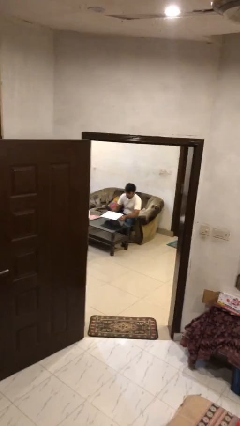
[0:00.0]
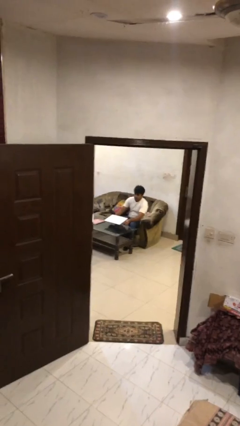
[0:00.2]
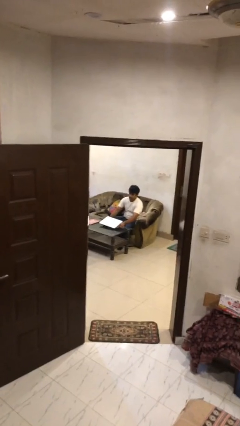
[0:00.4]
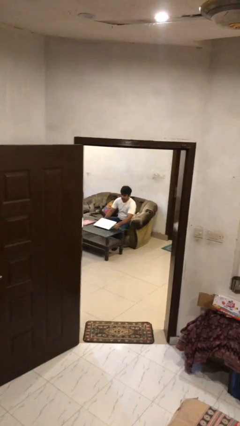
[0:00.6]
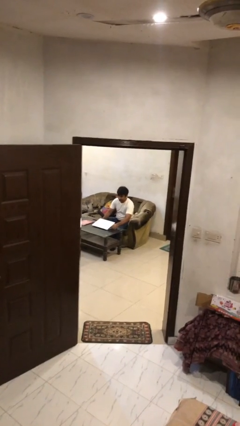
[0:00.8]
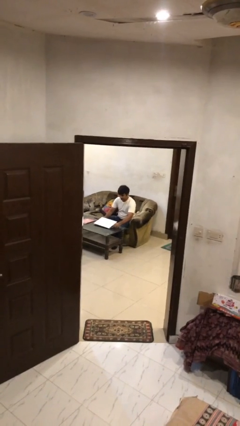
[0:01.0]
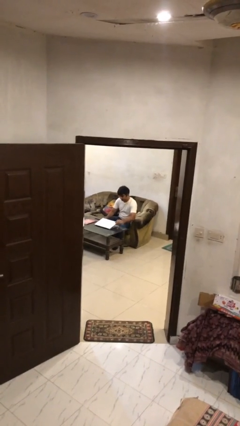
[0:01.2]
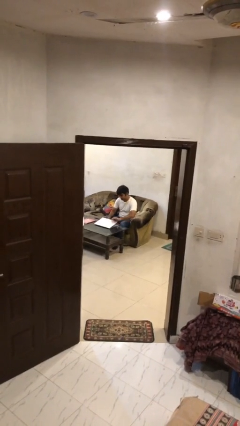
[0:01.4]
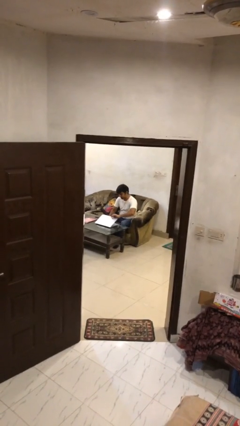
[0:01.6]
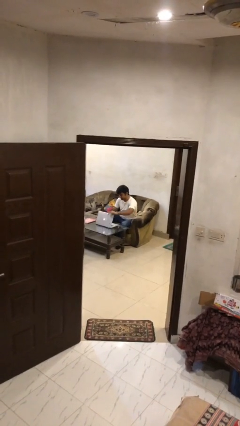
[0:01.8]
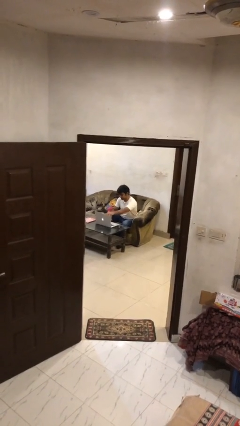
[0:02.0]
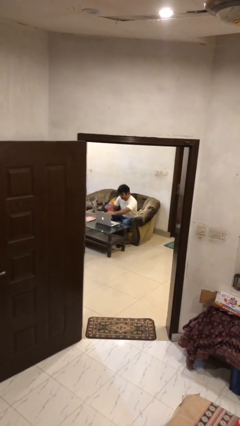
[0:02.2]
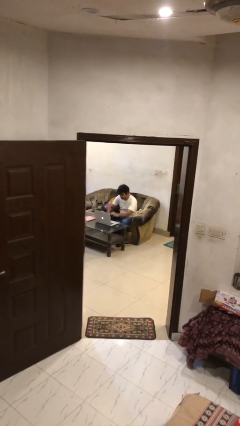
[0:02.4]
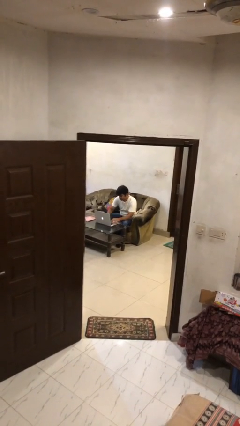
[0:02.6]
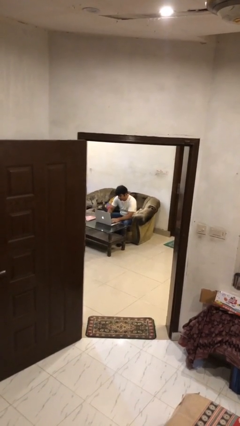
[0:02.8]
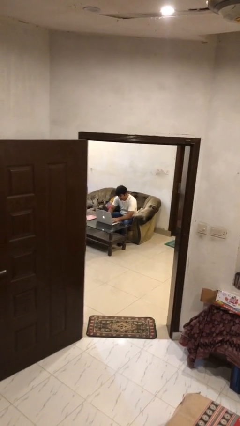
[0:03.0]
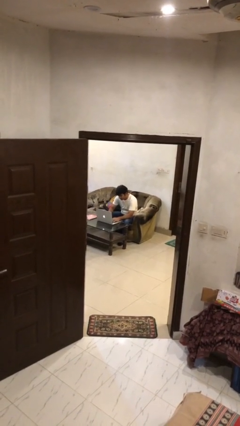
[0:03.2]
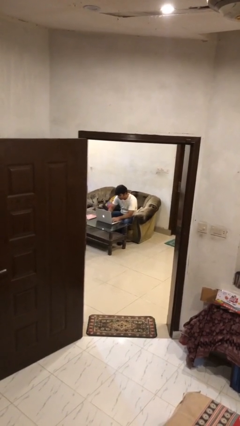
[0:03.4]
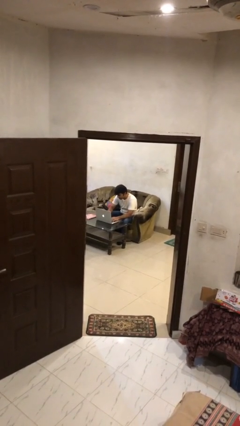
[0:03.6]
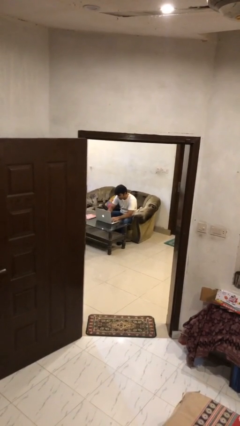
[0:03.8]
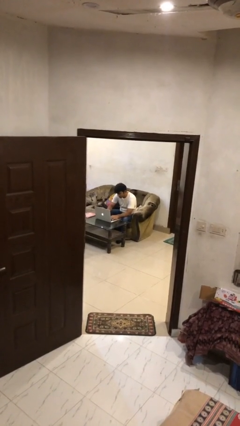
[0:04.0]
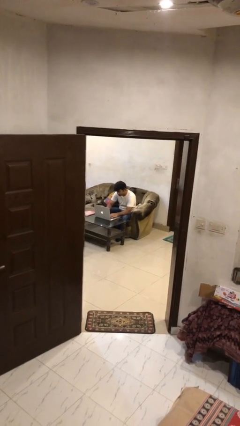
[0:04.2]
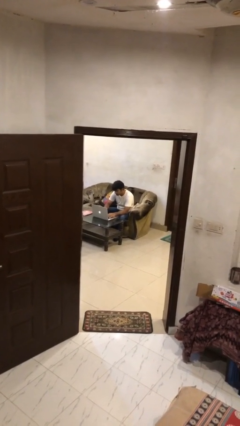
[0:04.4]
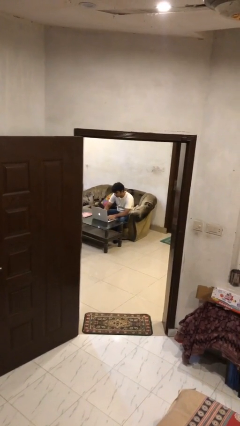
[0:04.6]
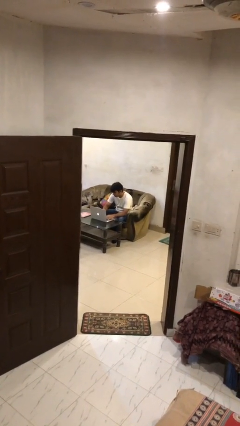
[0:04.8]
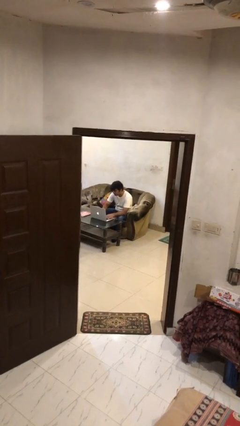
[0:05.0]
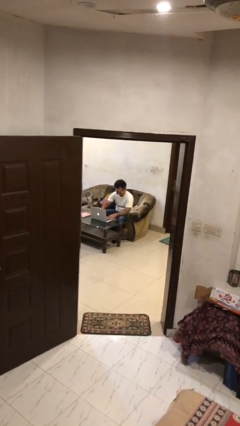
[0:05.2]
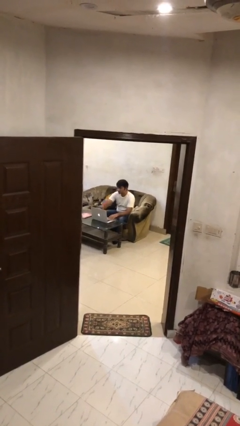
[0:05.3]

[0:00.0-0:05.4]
person interacts with laptop

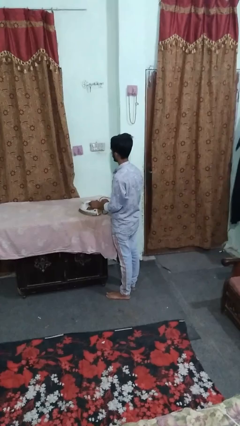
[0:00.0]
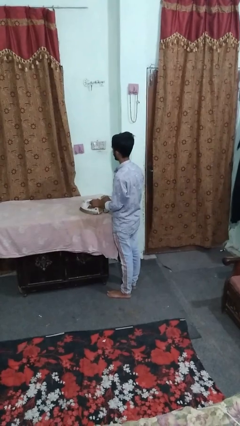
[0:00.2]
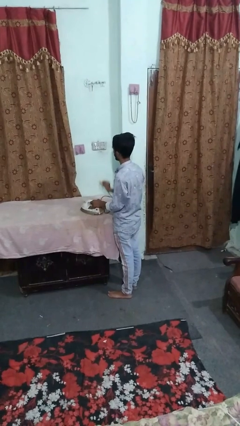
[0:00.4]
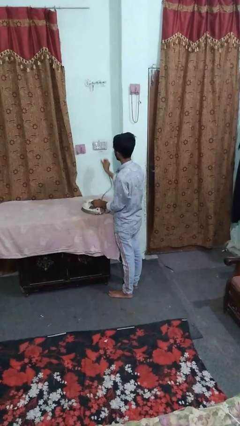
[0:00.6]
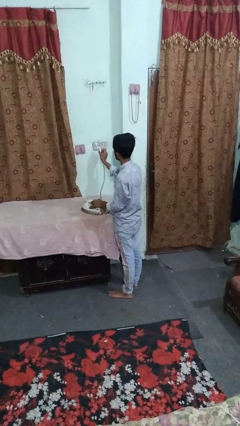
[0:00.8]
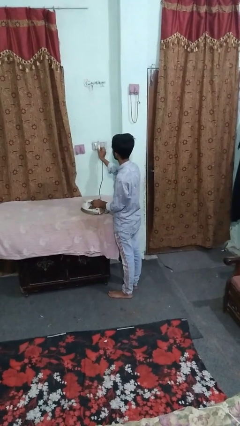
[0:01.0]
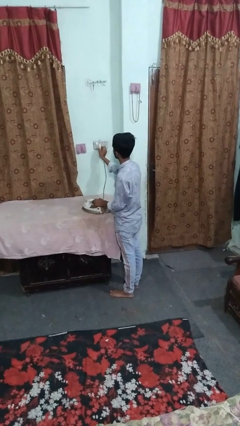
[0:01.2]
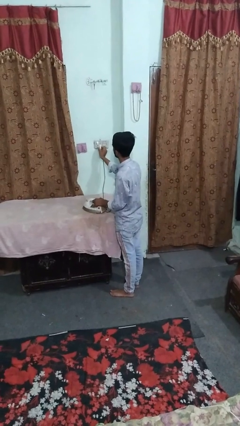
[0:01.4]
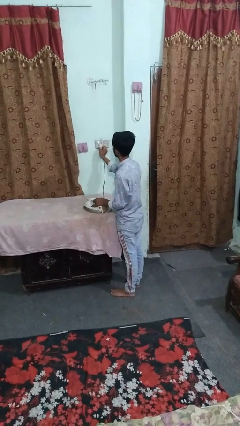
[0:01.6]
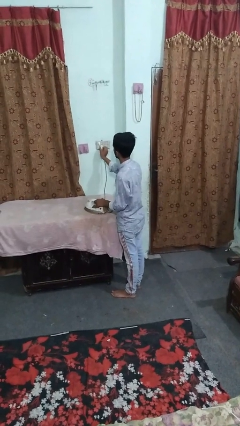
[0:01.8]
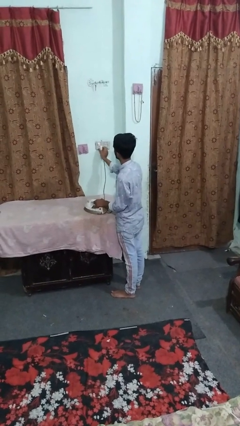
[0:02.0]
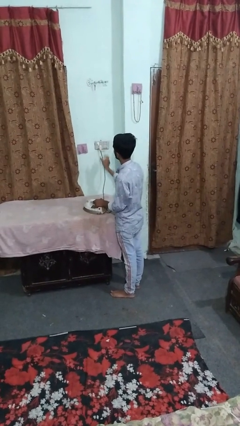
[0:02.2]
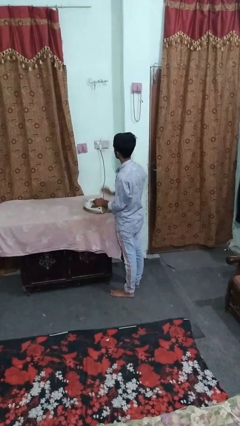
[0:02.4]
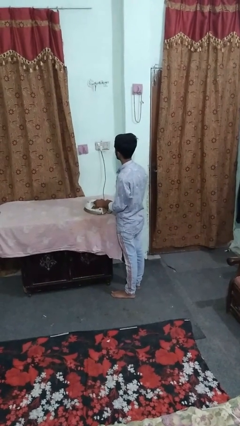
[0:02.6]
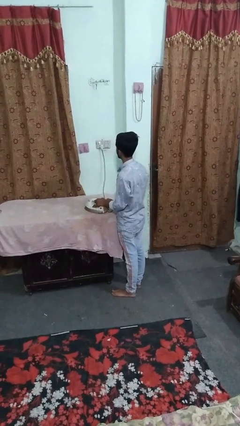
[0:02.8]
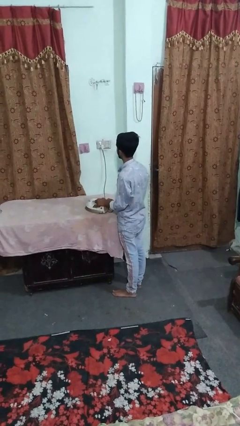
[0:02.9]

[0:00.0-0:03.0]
person plugs into electrical socket

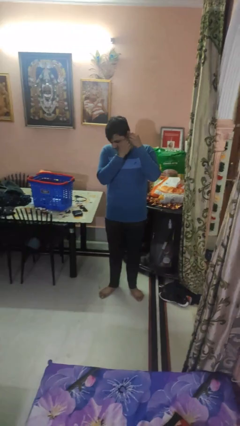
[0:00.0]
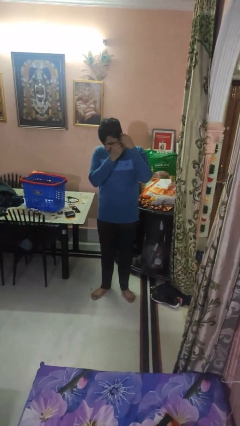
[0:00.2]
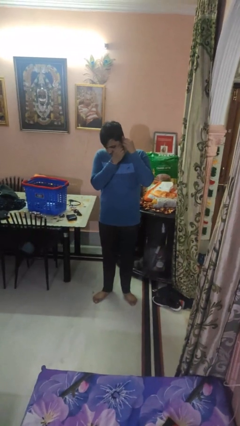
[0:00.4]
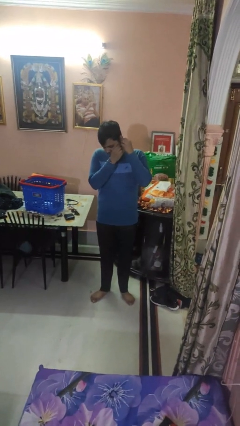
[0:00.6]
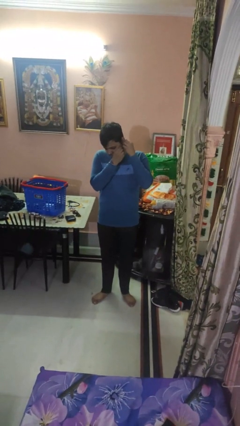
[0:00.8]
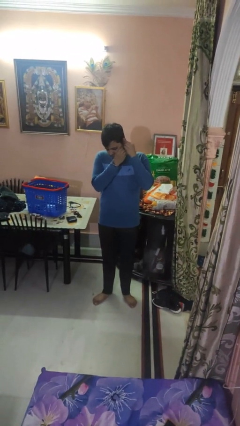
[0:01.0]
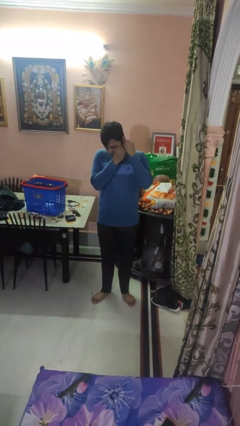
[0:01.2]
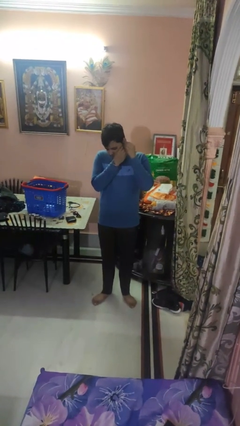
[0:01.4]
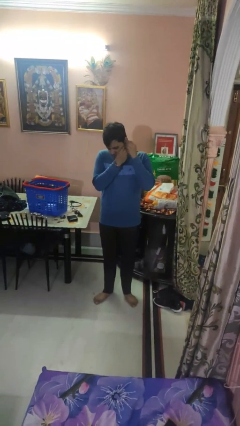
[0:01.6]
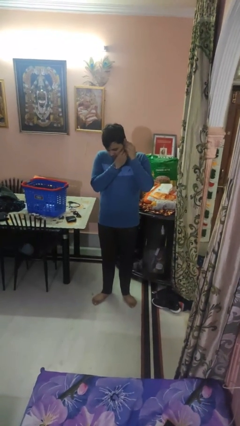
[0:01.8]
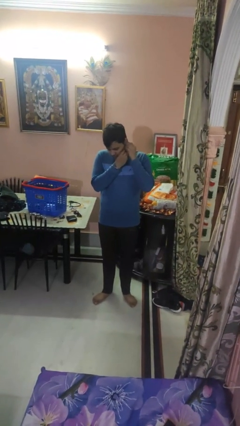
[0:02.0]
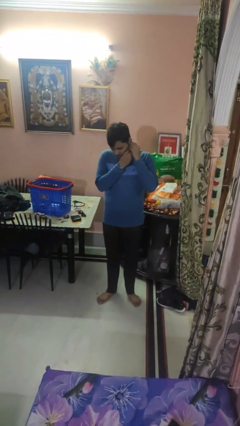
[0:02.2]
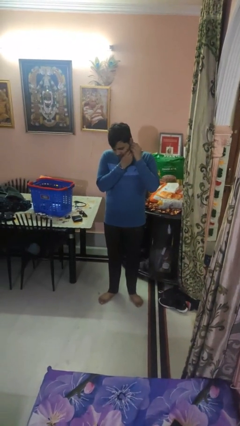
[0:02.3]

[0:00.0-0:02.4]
person puts on earrings

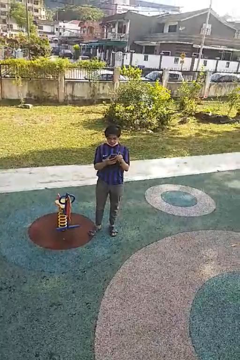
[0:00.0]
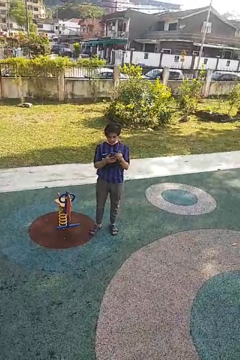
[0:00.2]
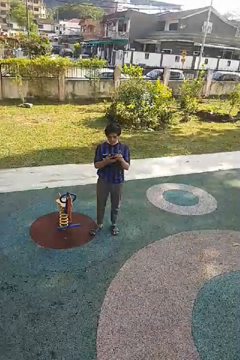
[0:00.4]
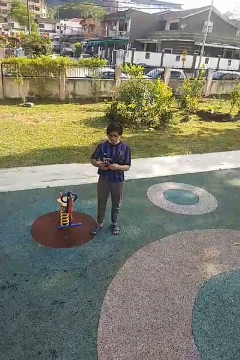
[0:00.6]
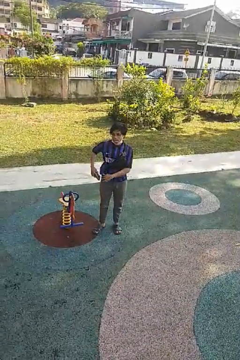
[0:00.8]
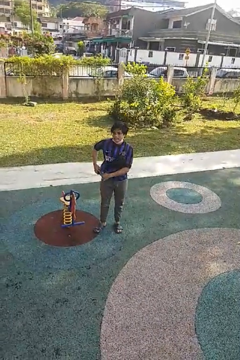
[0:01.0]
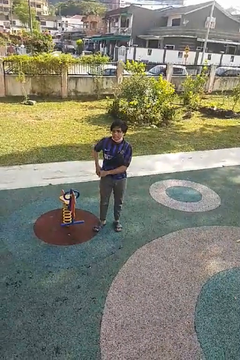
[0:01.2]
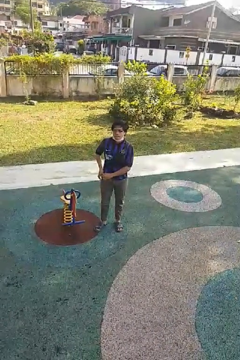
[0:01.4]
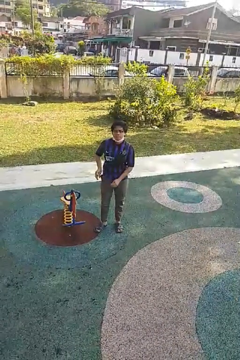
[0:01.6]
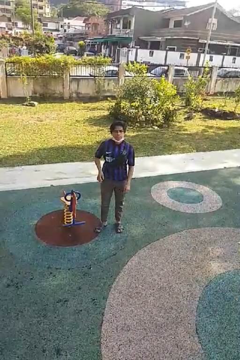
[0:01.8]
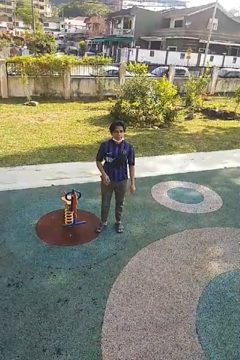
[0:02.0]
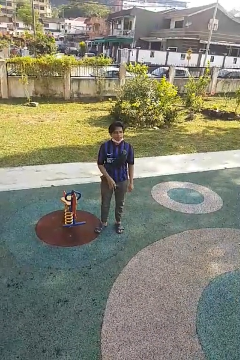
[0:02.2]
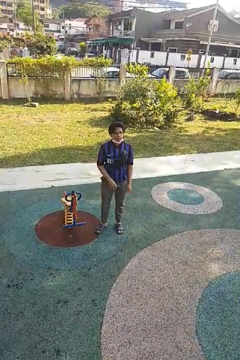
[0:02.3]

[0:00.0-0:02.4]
person puts phone into pocket

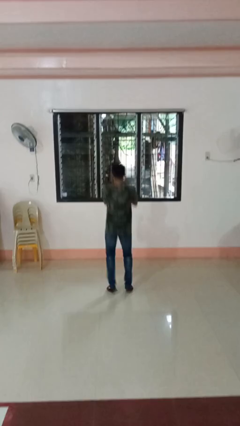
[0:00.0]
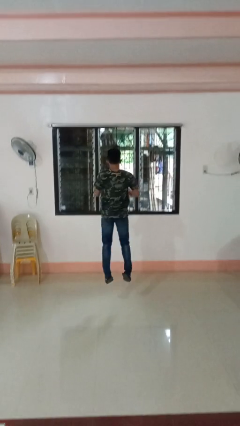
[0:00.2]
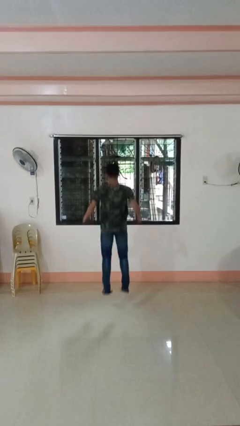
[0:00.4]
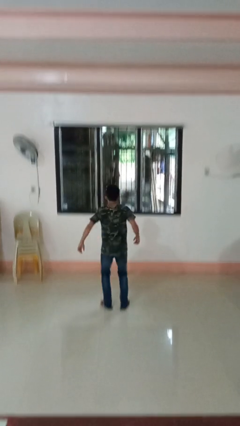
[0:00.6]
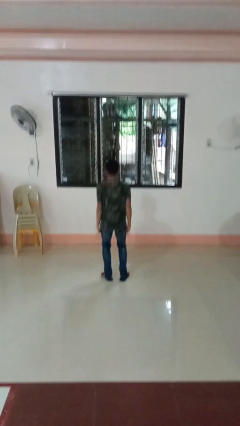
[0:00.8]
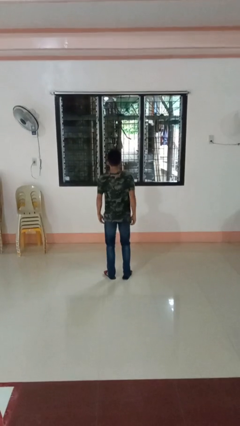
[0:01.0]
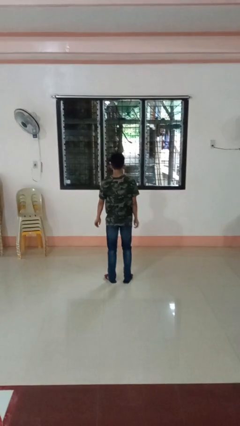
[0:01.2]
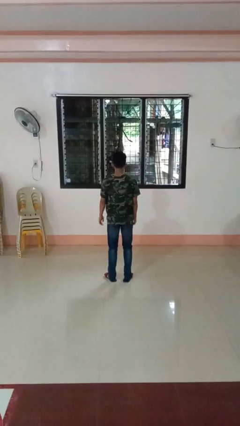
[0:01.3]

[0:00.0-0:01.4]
person jumps

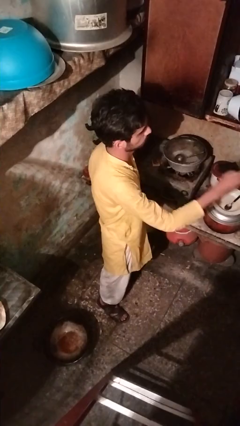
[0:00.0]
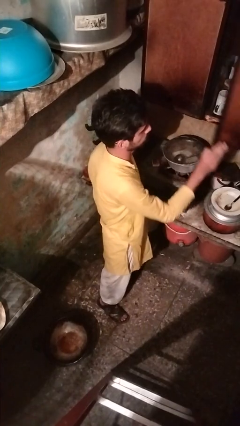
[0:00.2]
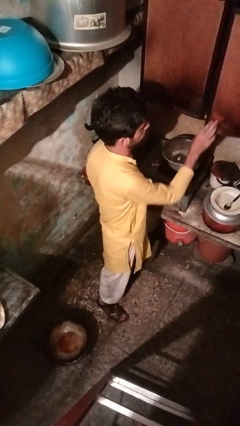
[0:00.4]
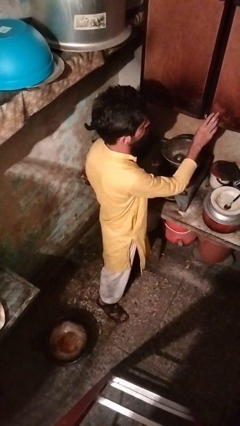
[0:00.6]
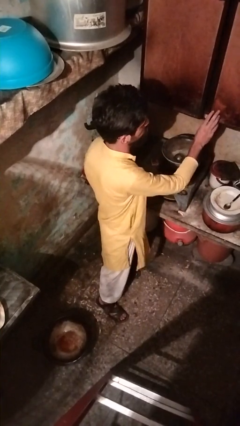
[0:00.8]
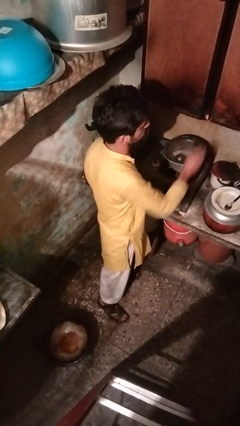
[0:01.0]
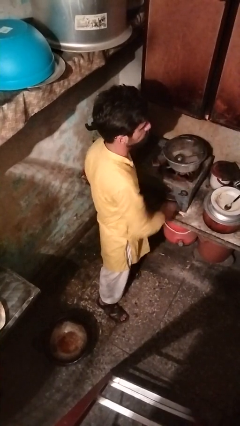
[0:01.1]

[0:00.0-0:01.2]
person closes cabinet

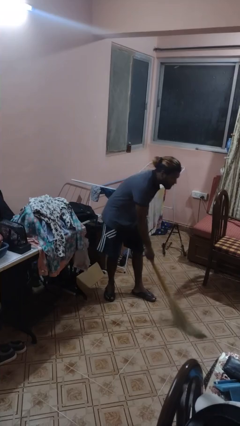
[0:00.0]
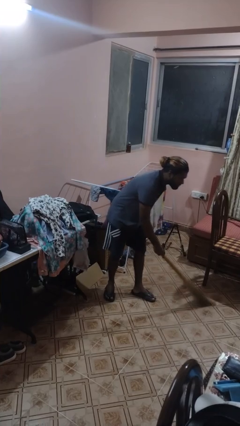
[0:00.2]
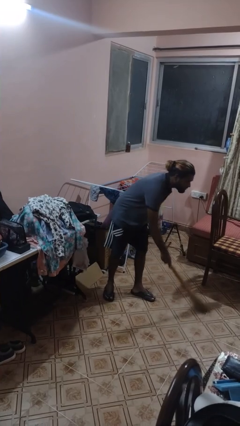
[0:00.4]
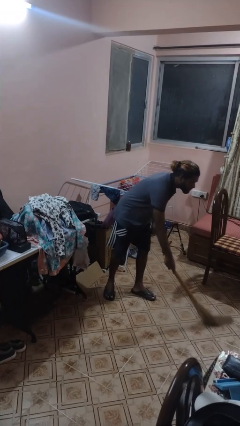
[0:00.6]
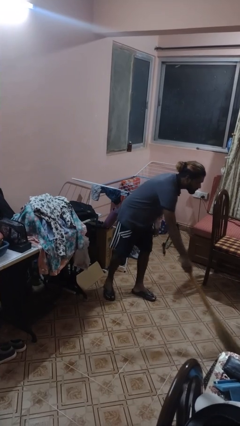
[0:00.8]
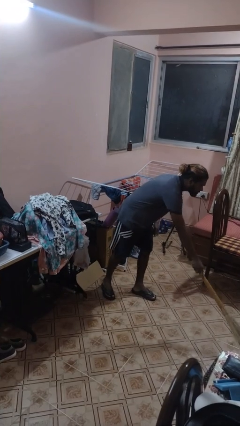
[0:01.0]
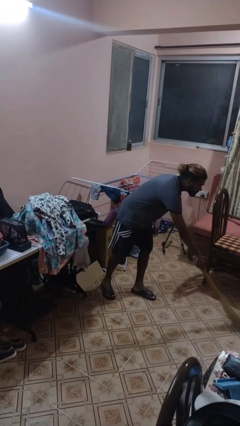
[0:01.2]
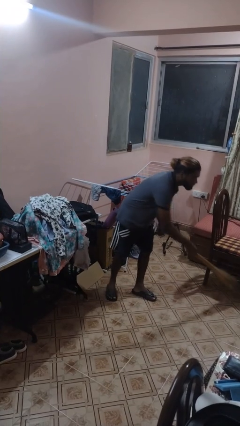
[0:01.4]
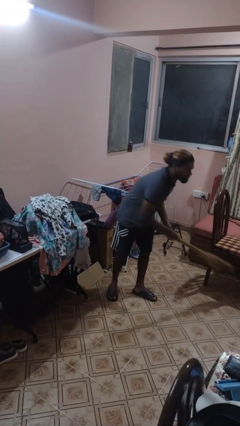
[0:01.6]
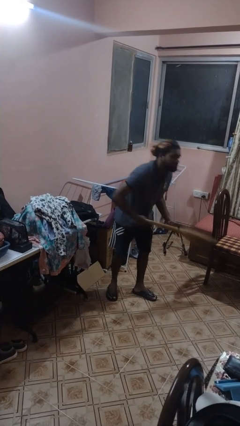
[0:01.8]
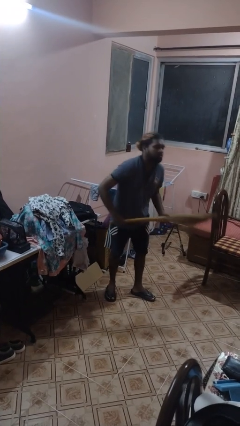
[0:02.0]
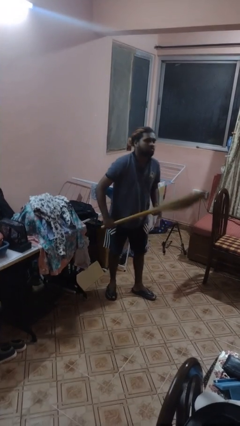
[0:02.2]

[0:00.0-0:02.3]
person sweeps floor
